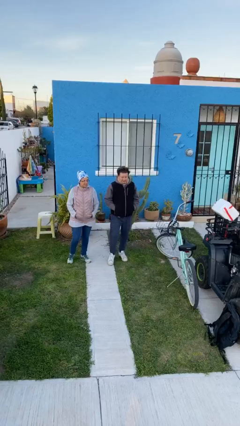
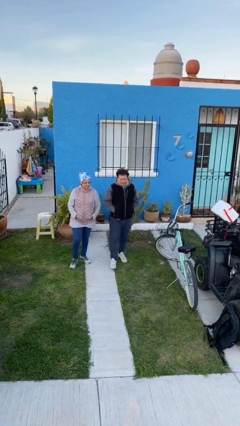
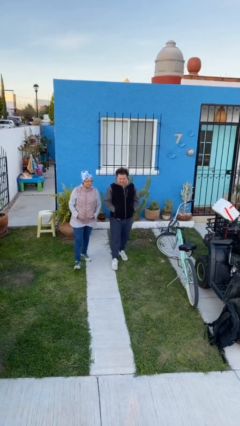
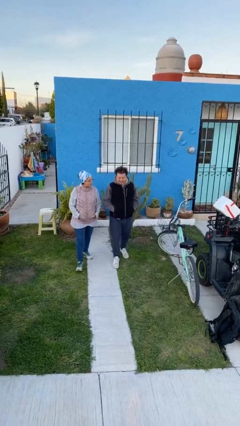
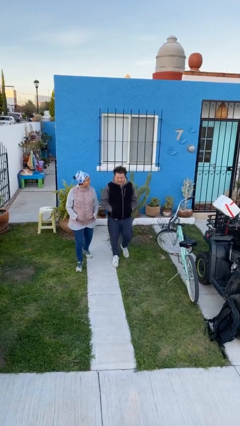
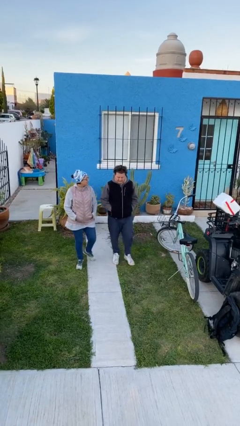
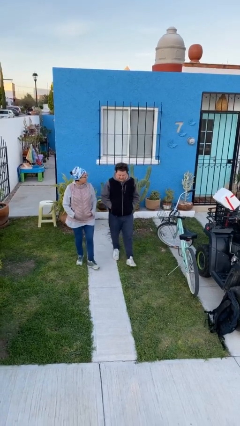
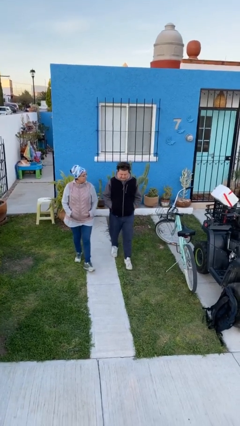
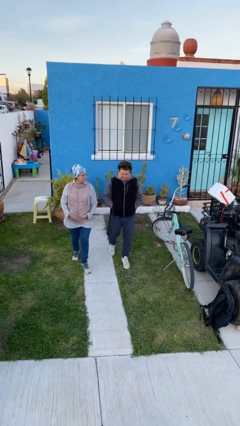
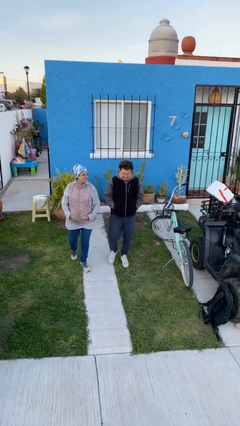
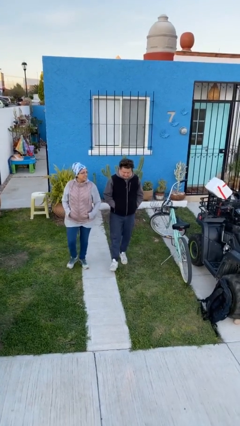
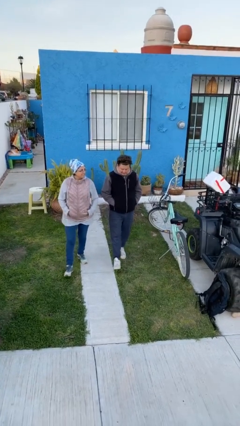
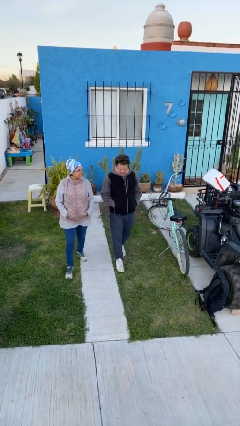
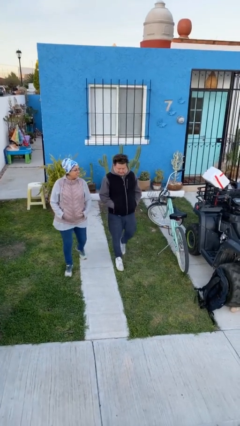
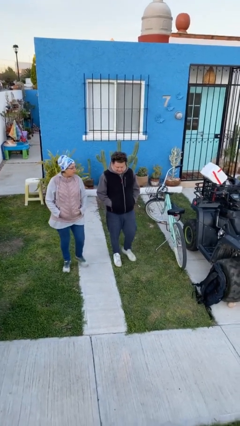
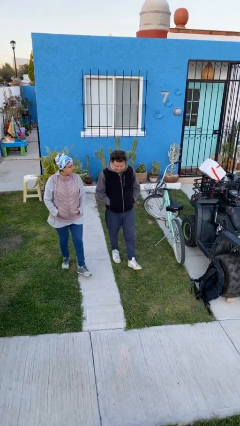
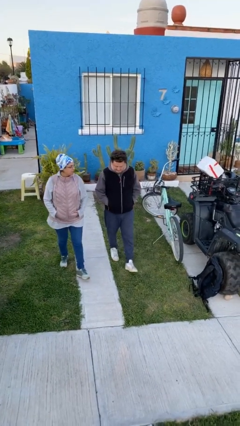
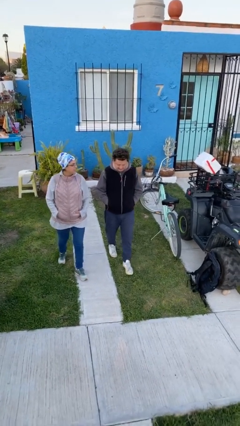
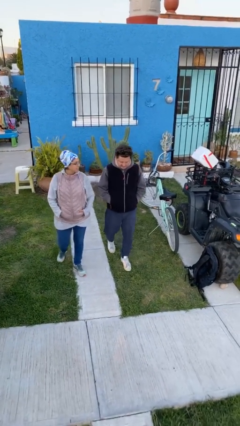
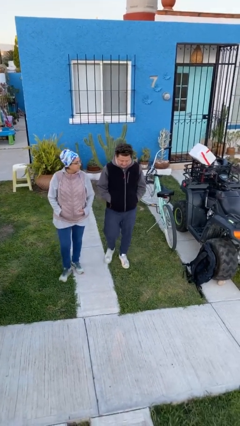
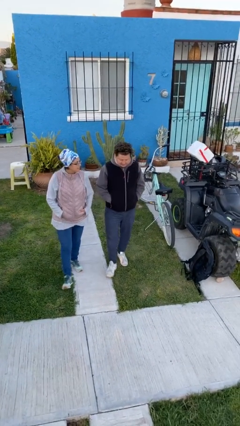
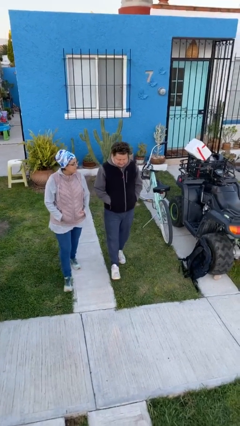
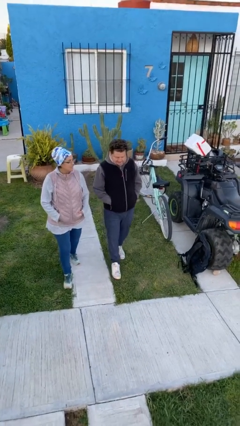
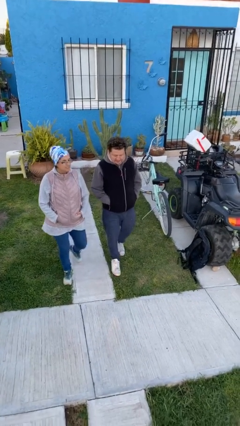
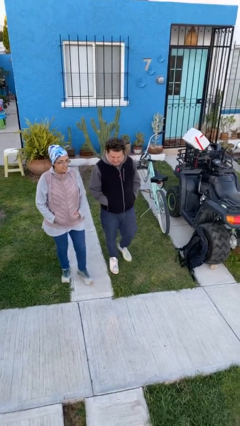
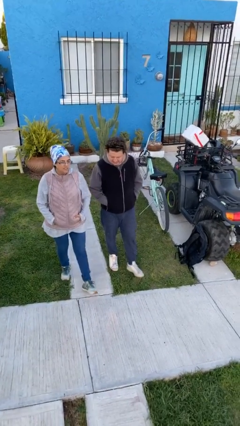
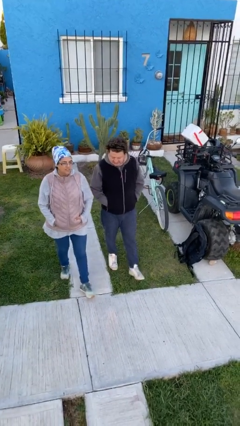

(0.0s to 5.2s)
person talks to person

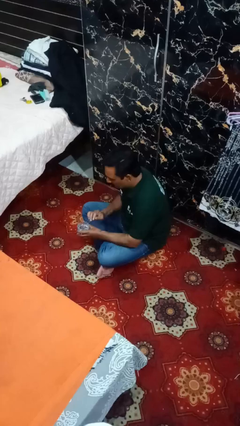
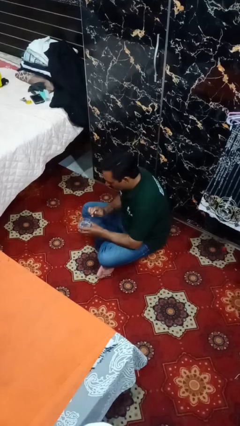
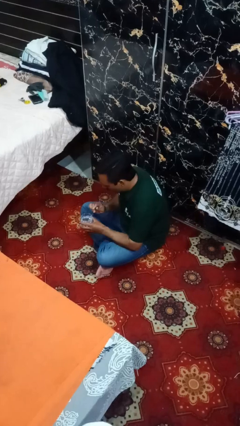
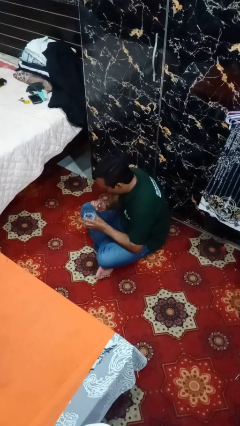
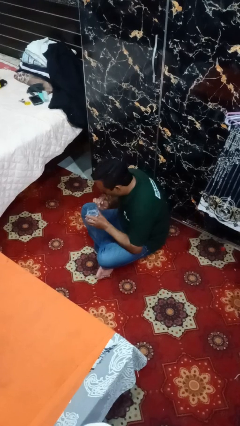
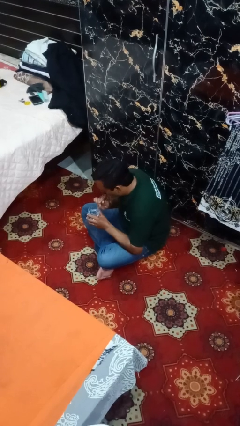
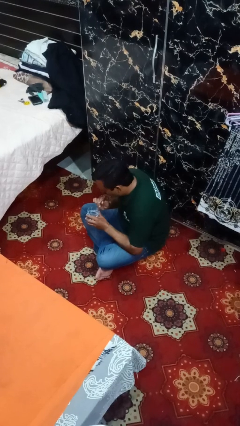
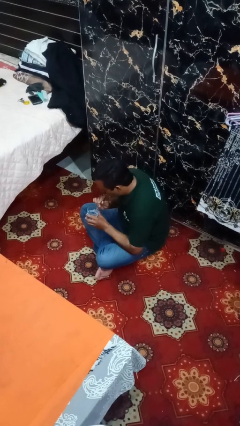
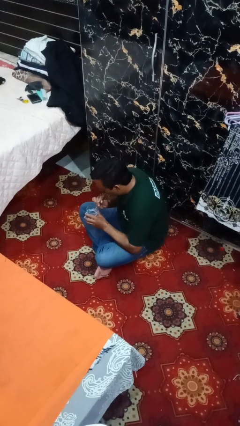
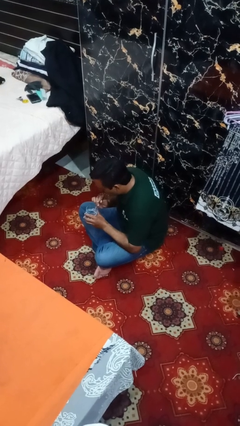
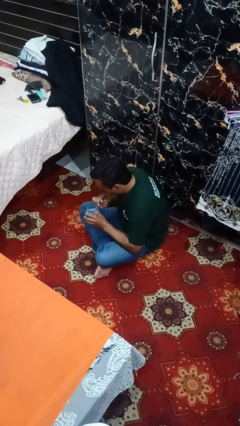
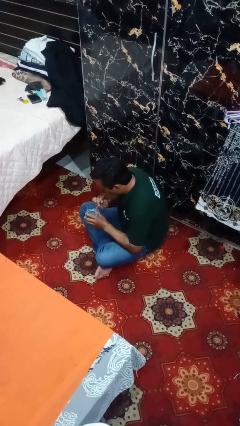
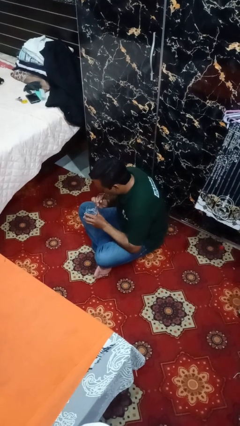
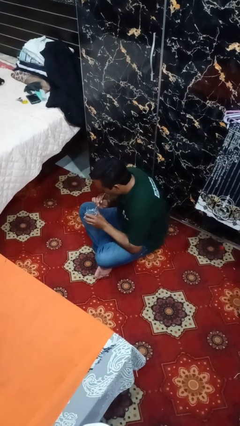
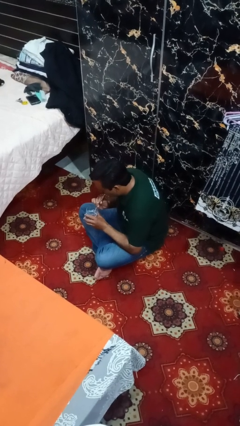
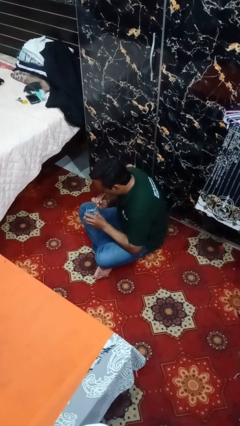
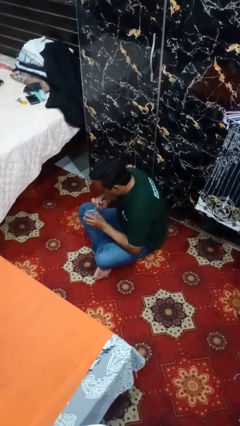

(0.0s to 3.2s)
person drinks from straw

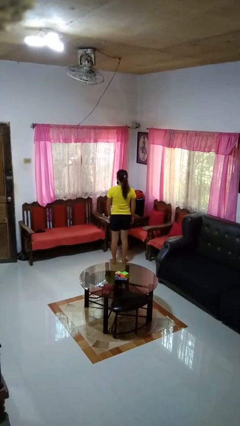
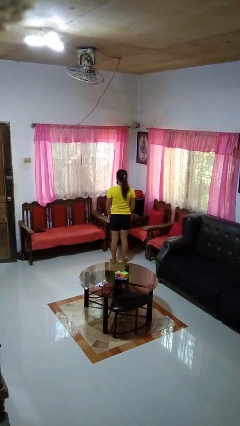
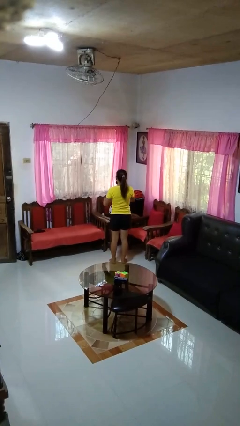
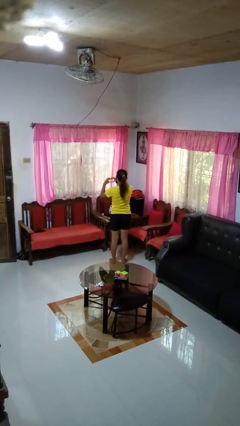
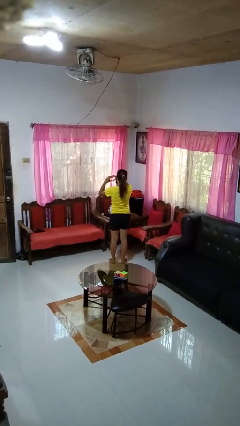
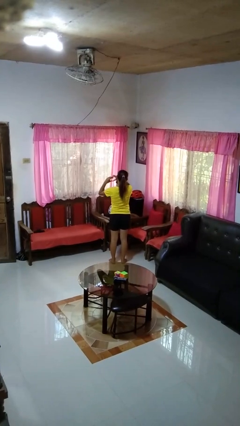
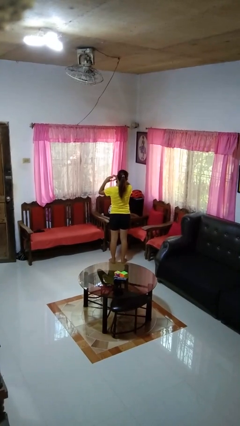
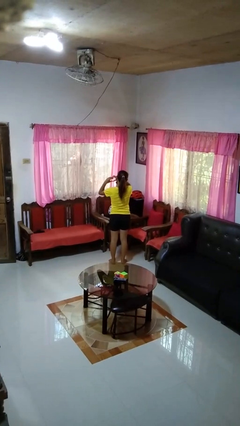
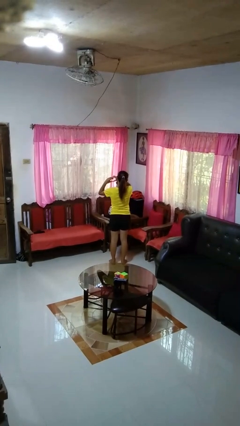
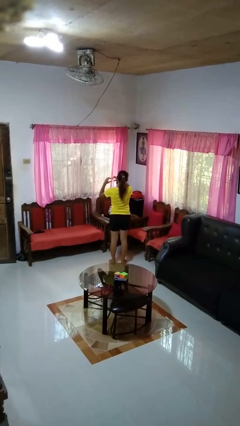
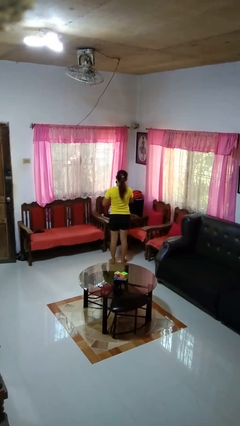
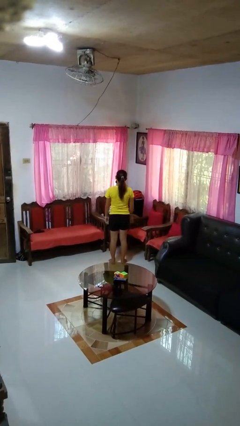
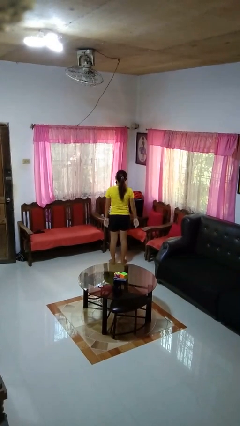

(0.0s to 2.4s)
person gestures heart

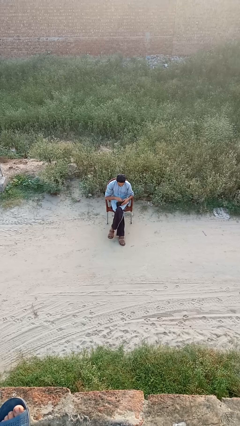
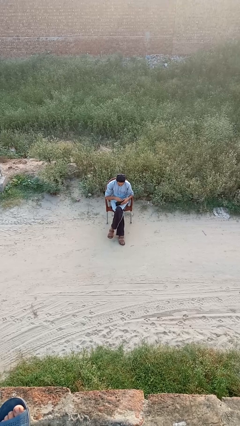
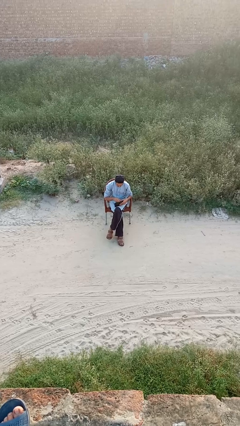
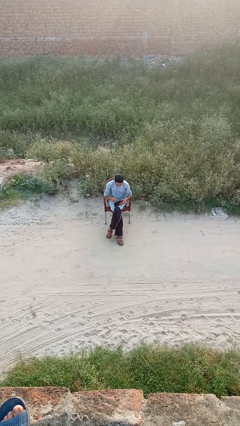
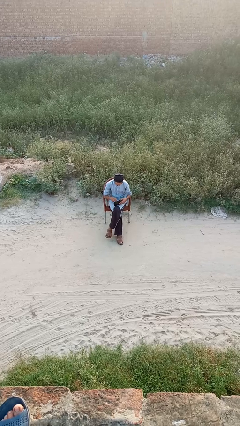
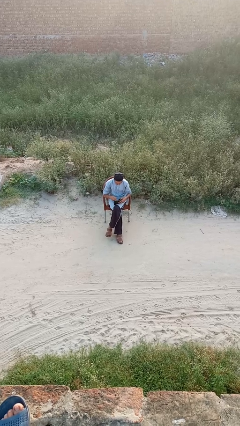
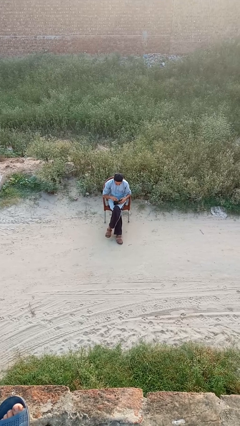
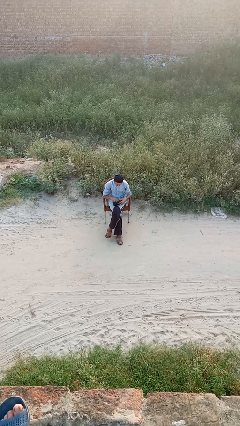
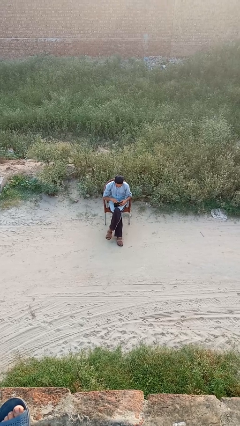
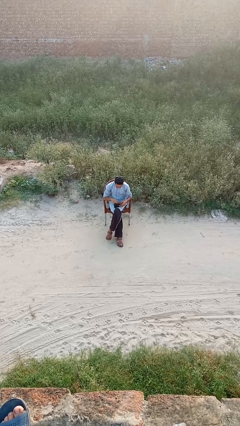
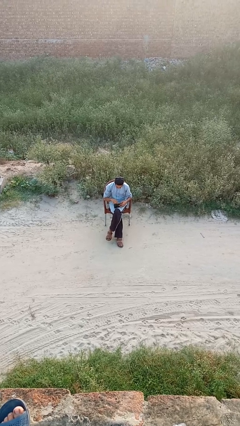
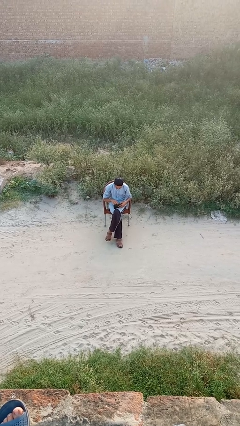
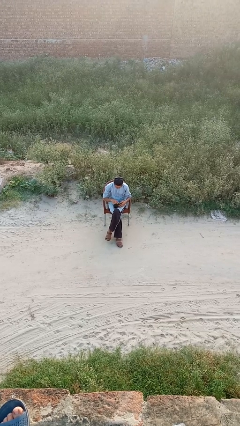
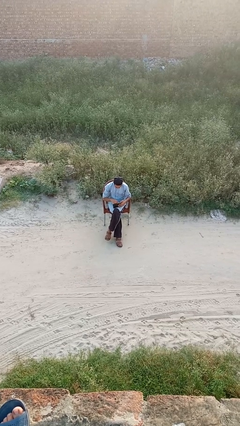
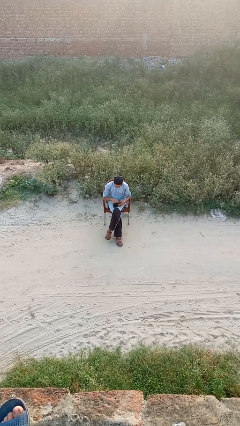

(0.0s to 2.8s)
person searches in purse

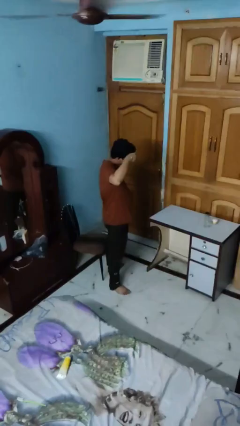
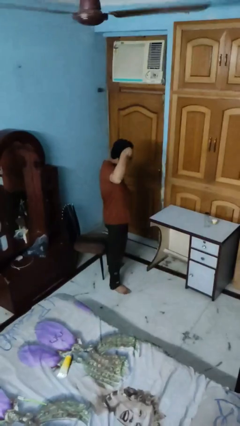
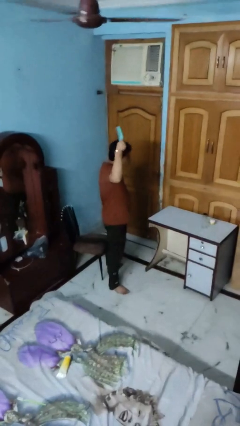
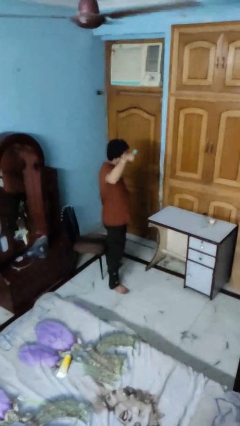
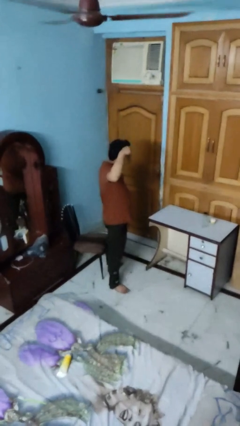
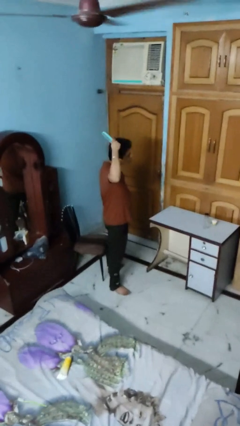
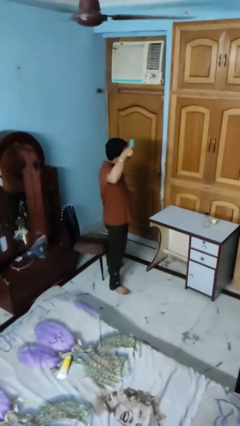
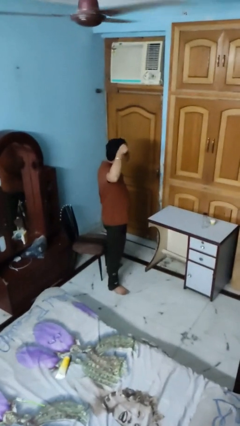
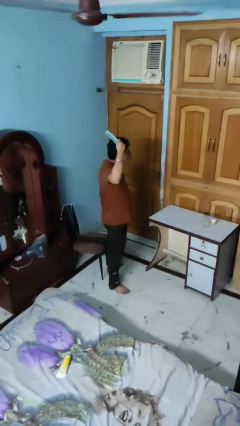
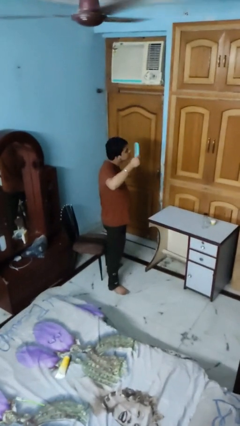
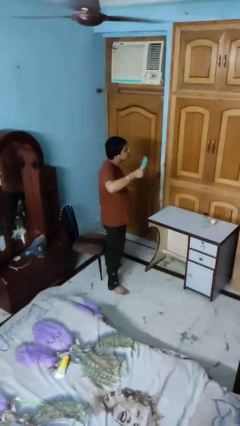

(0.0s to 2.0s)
person brushes hair

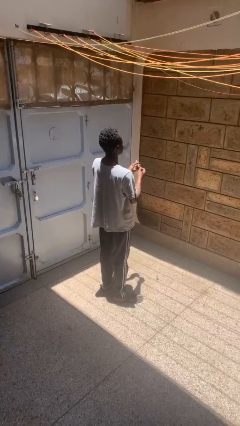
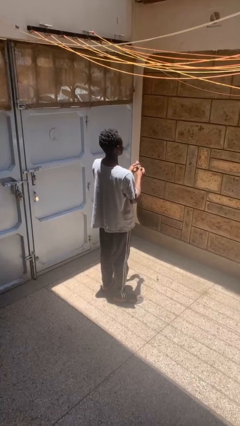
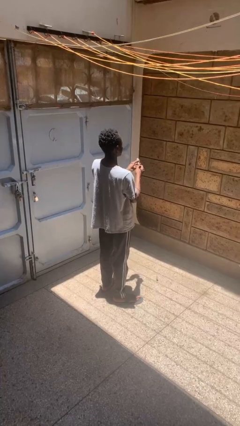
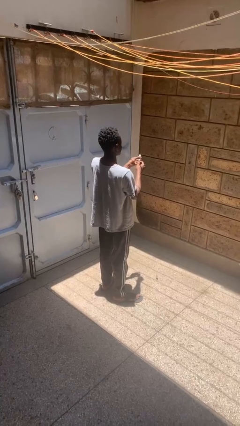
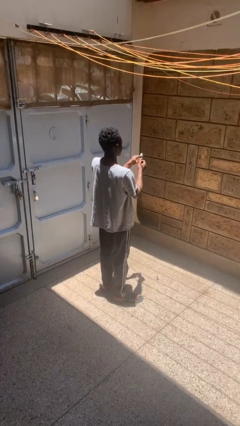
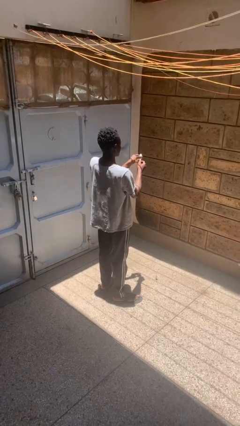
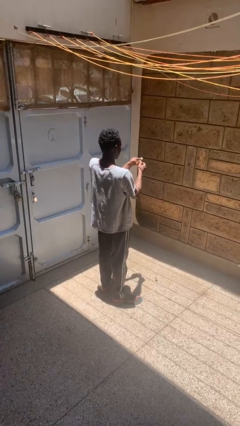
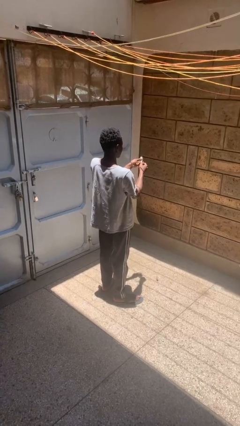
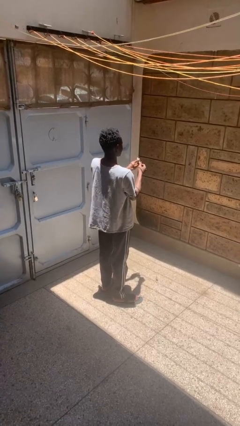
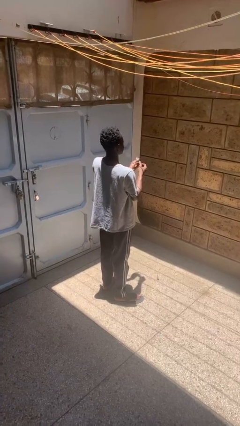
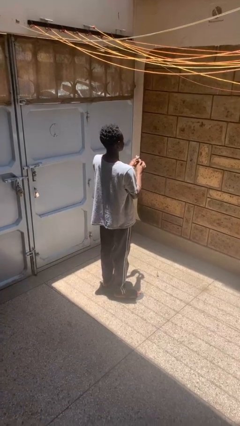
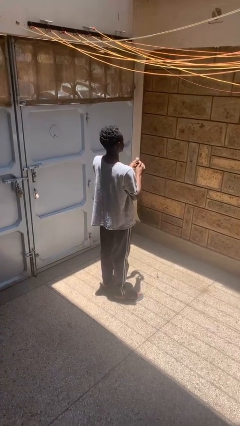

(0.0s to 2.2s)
person clips fingernails
